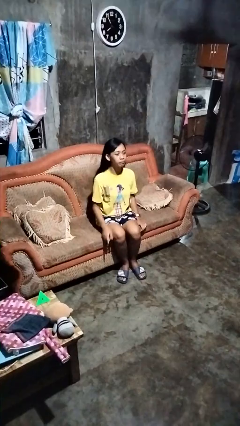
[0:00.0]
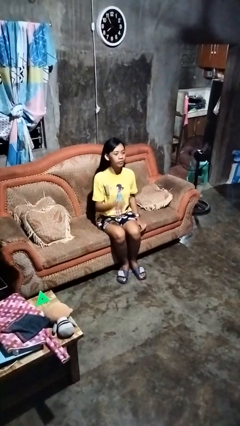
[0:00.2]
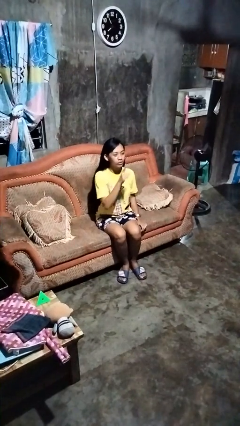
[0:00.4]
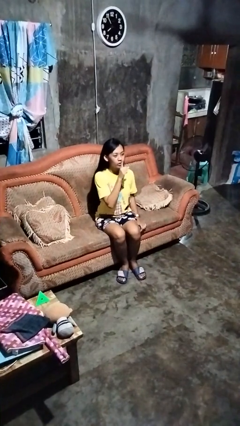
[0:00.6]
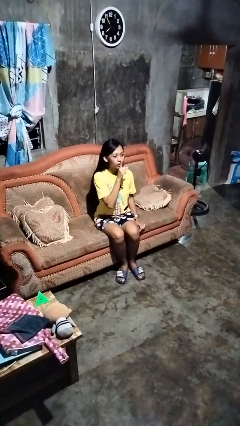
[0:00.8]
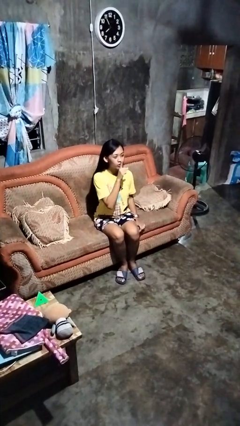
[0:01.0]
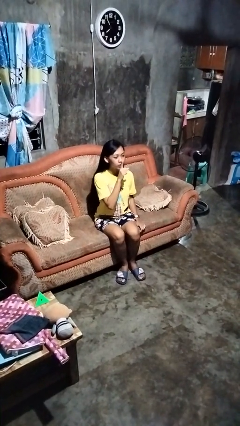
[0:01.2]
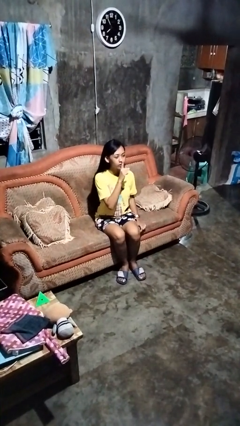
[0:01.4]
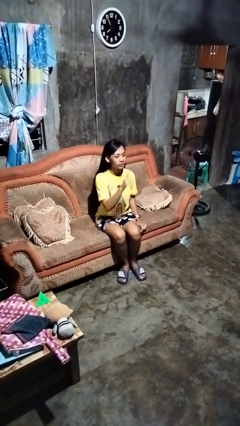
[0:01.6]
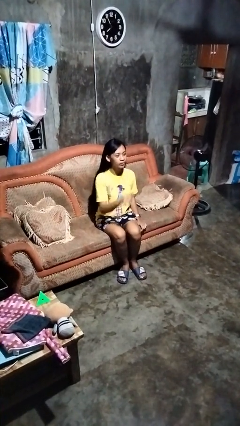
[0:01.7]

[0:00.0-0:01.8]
person gestures be quiet

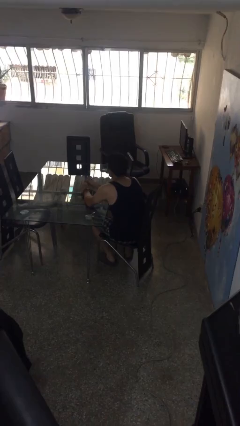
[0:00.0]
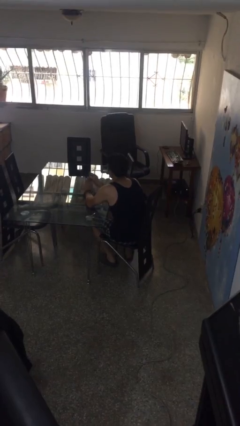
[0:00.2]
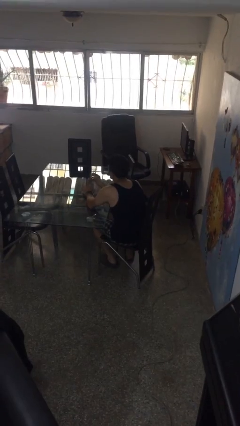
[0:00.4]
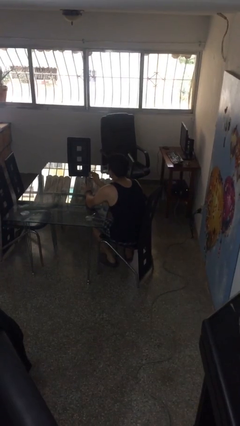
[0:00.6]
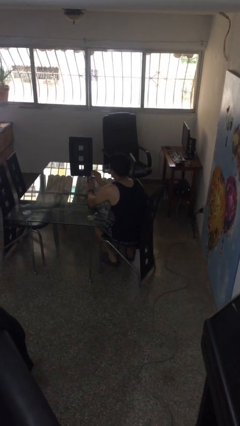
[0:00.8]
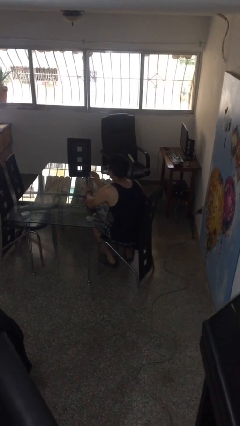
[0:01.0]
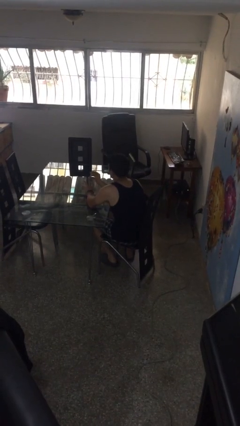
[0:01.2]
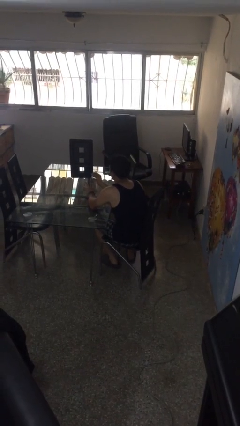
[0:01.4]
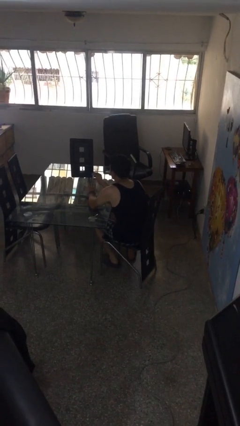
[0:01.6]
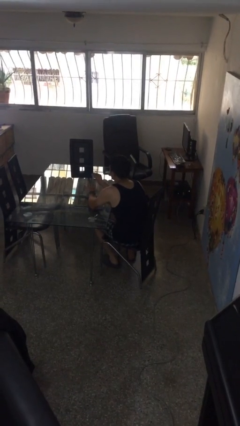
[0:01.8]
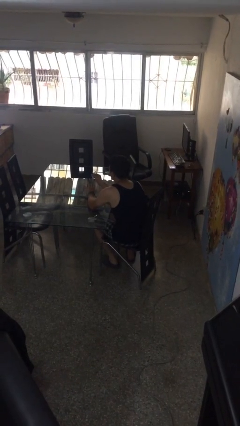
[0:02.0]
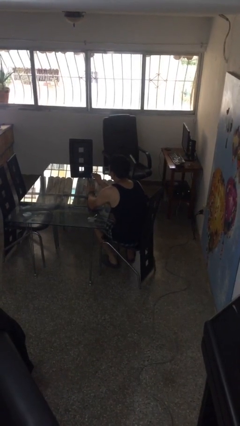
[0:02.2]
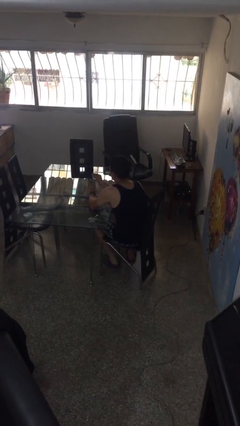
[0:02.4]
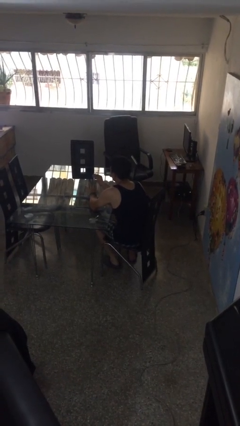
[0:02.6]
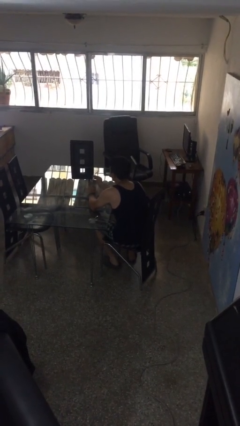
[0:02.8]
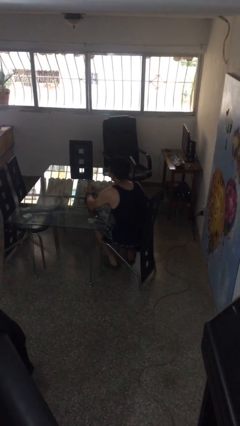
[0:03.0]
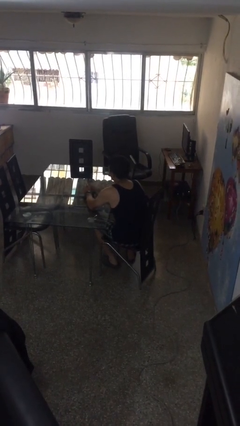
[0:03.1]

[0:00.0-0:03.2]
person clips fingernails

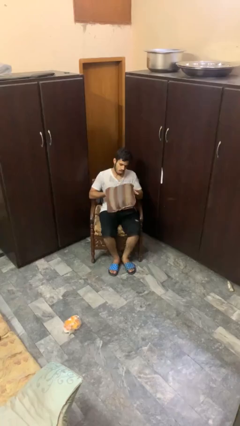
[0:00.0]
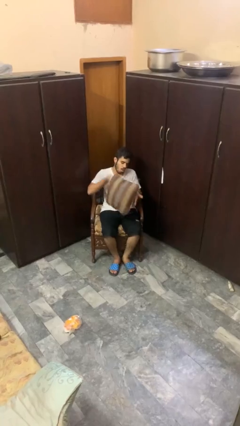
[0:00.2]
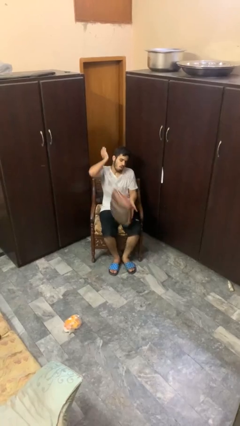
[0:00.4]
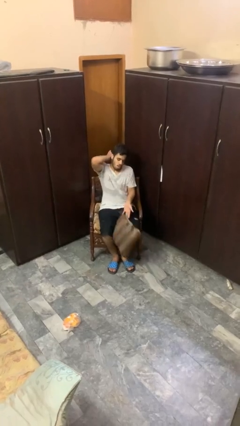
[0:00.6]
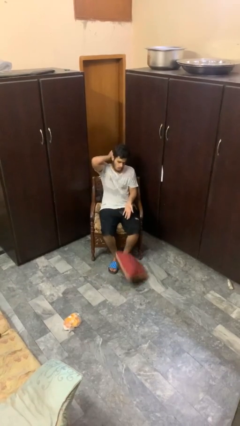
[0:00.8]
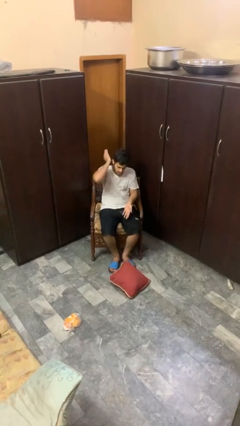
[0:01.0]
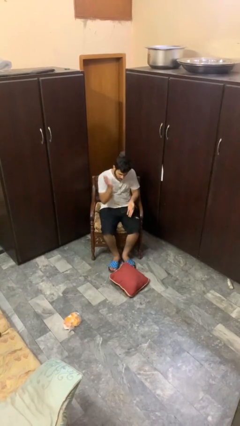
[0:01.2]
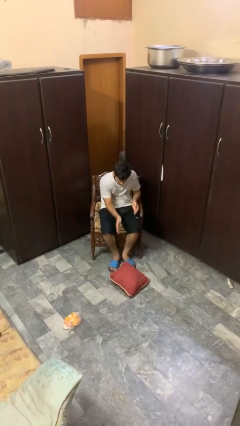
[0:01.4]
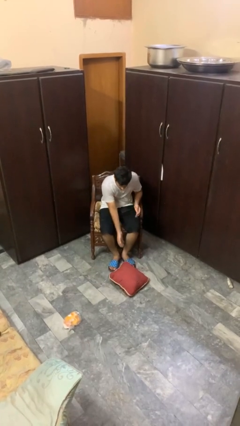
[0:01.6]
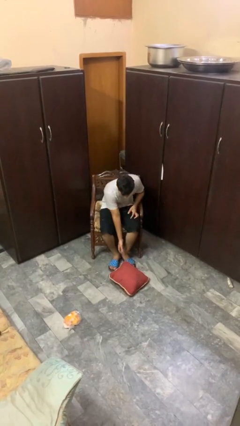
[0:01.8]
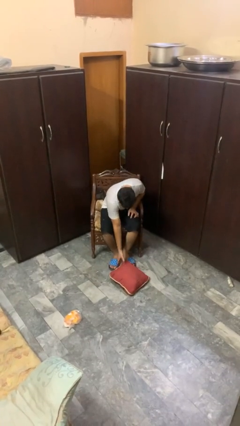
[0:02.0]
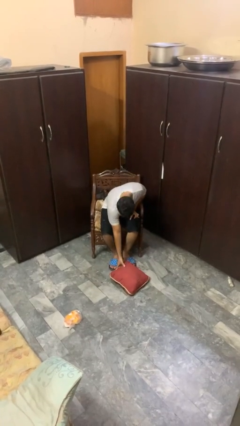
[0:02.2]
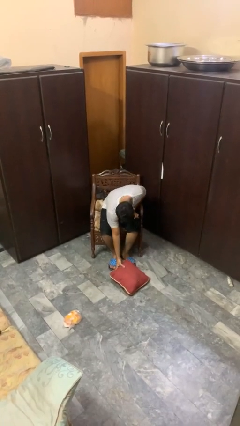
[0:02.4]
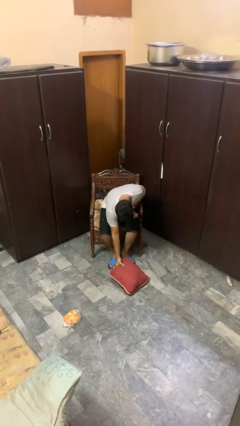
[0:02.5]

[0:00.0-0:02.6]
person drops object

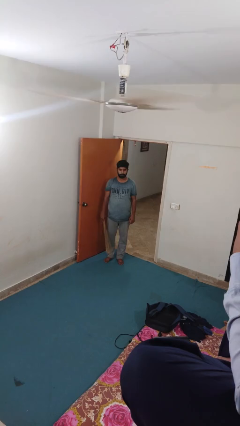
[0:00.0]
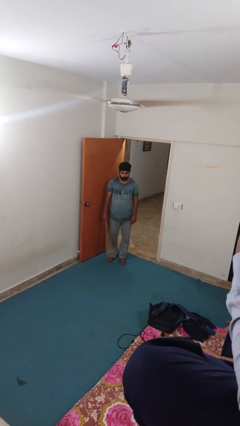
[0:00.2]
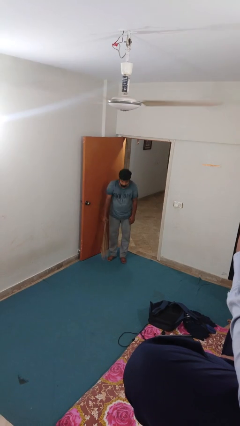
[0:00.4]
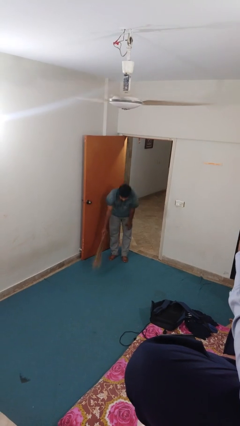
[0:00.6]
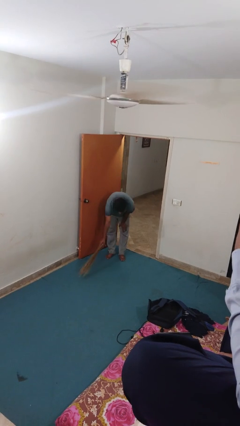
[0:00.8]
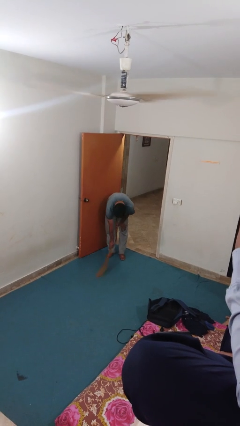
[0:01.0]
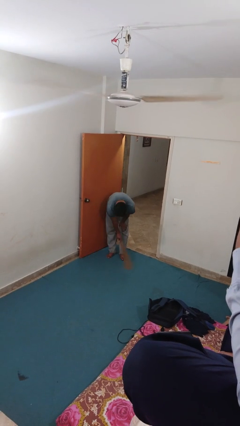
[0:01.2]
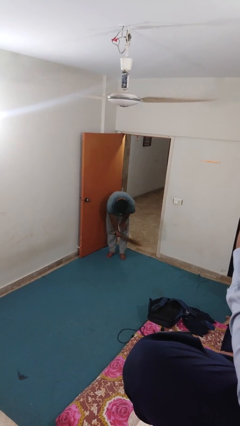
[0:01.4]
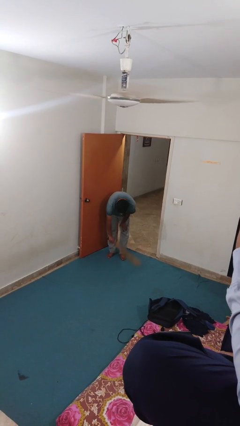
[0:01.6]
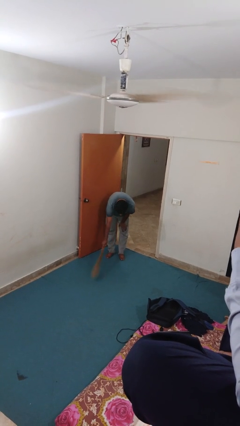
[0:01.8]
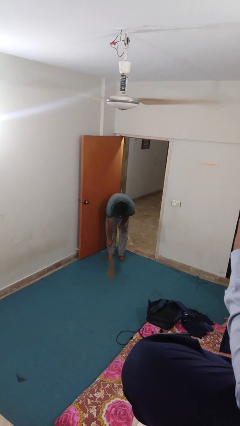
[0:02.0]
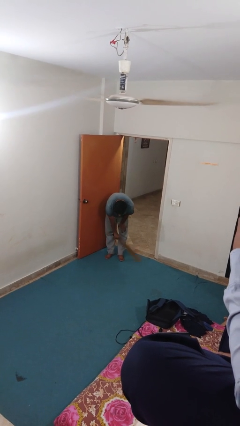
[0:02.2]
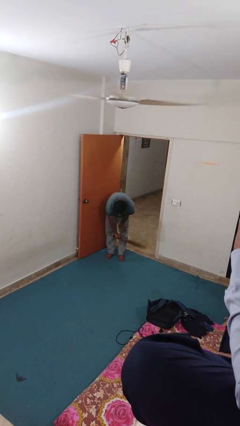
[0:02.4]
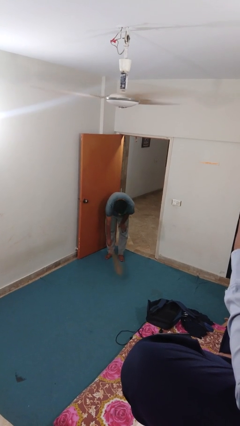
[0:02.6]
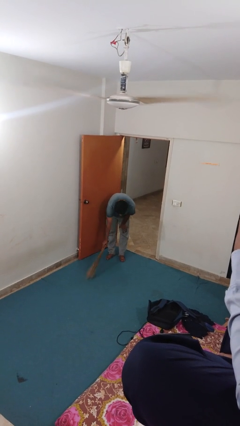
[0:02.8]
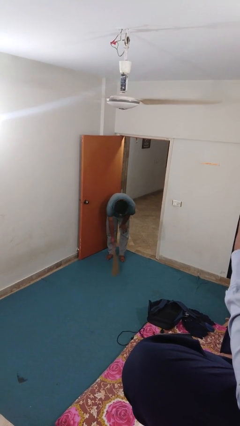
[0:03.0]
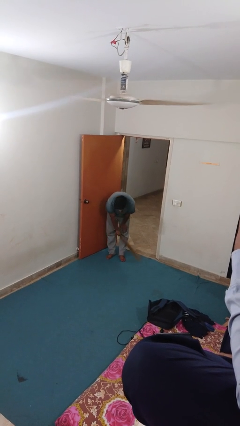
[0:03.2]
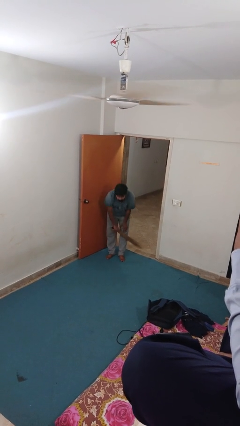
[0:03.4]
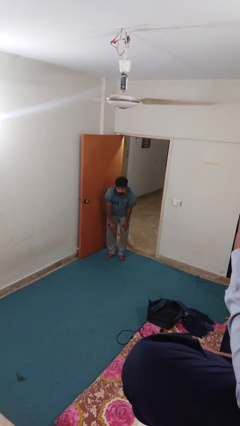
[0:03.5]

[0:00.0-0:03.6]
person sweeps floor

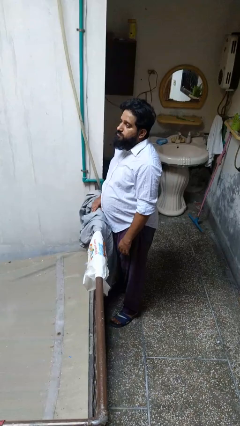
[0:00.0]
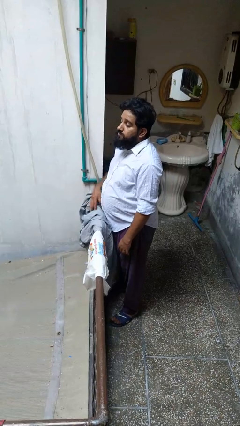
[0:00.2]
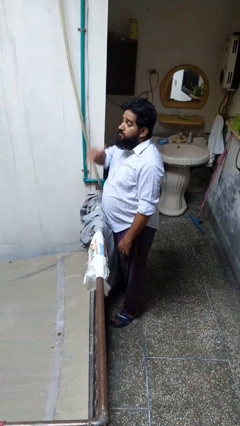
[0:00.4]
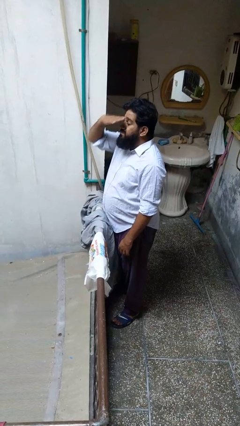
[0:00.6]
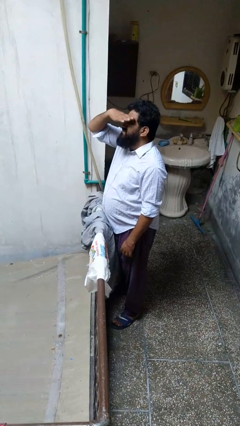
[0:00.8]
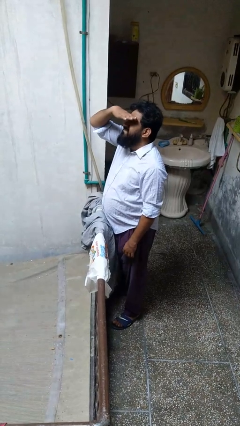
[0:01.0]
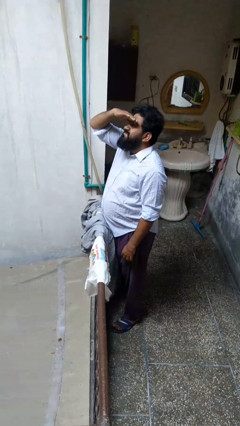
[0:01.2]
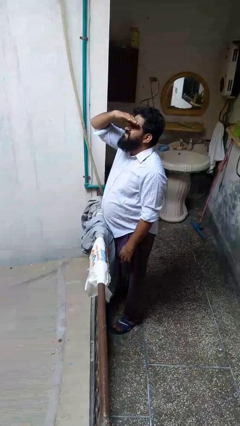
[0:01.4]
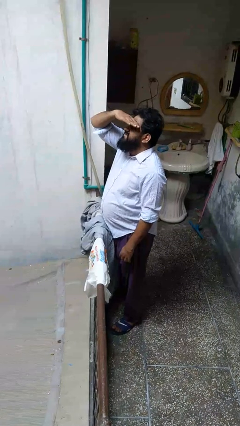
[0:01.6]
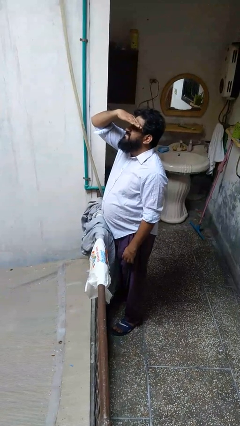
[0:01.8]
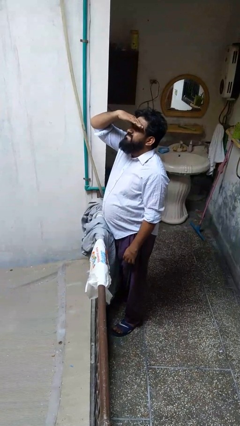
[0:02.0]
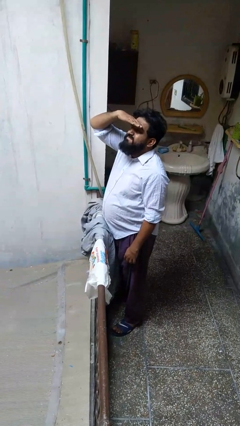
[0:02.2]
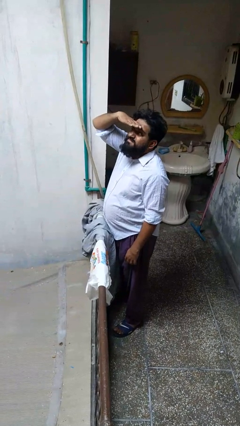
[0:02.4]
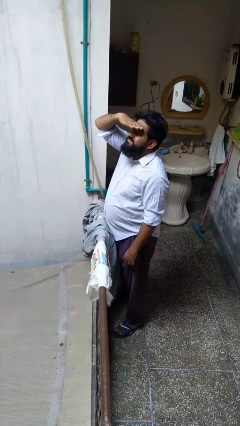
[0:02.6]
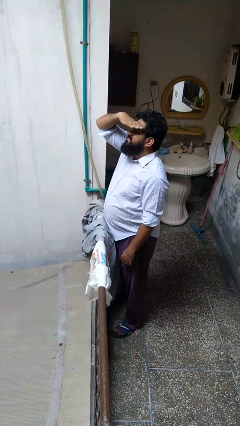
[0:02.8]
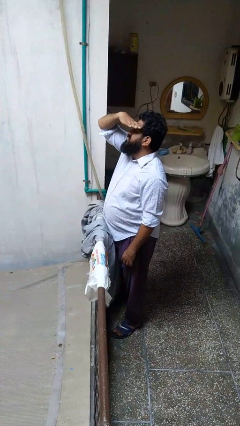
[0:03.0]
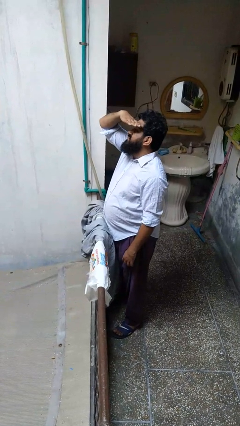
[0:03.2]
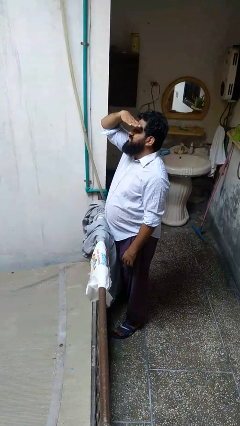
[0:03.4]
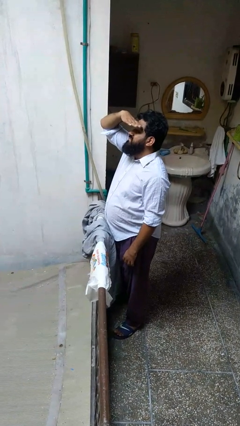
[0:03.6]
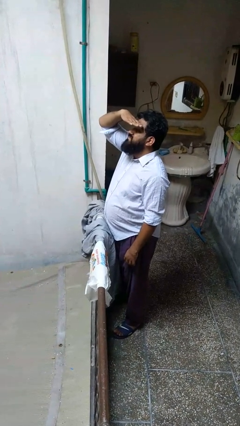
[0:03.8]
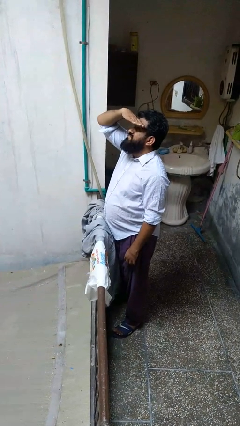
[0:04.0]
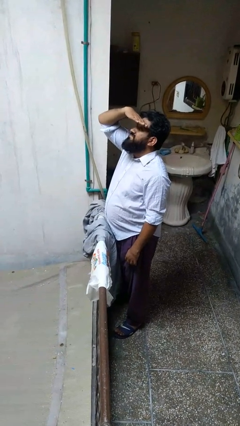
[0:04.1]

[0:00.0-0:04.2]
person shades eyes

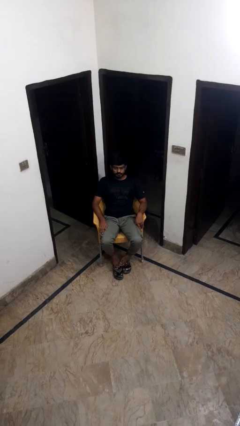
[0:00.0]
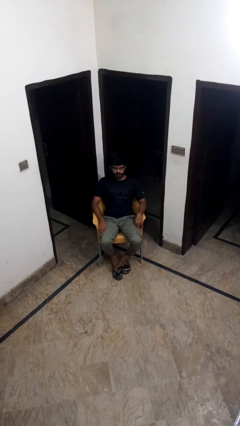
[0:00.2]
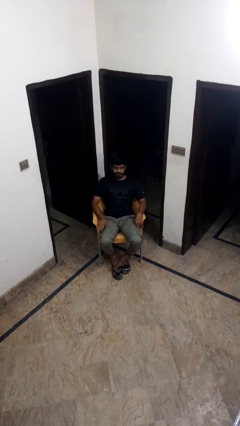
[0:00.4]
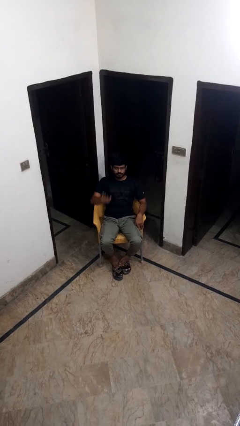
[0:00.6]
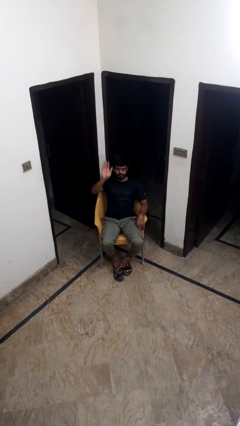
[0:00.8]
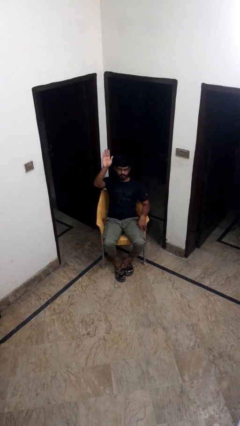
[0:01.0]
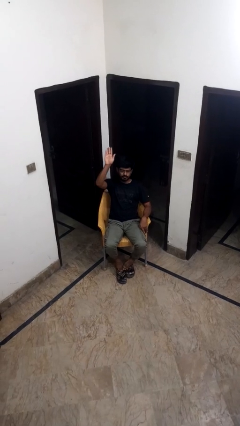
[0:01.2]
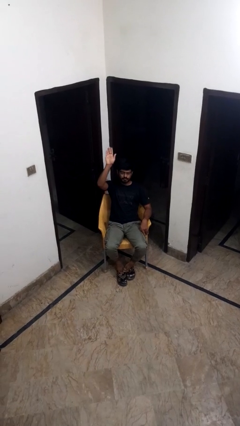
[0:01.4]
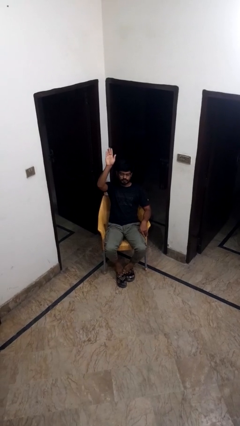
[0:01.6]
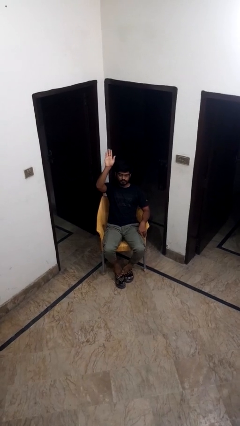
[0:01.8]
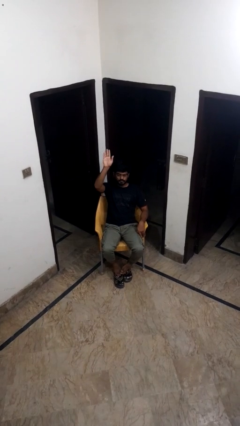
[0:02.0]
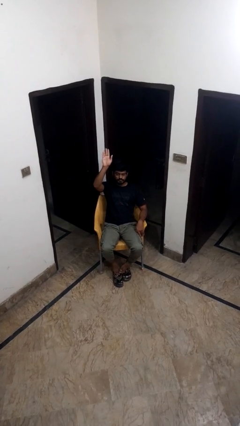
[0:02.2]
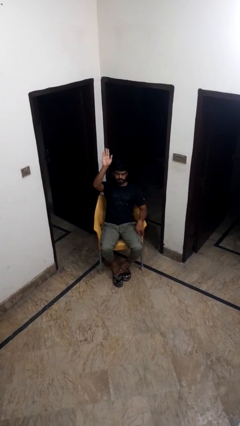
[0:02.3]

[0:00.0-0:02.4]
person gestures raise hand
